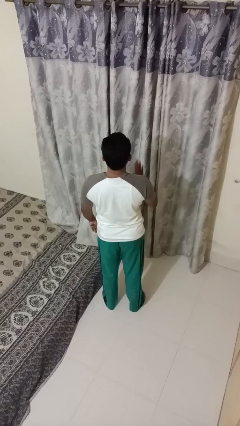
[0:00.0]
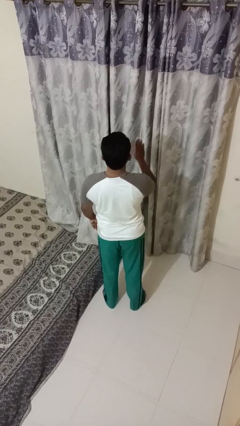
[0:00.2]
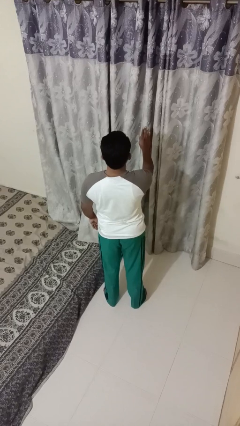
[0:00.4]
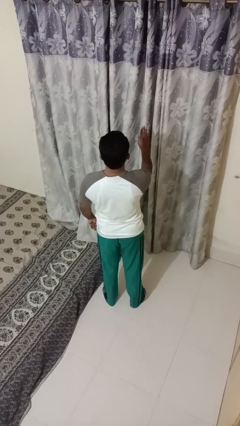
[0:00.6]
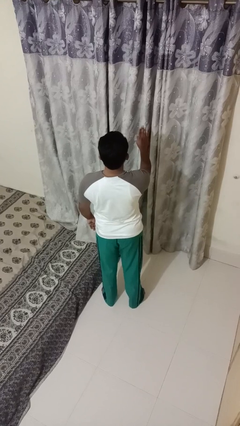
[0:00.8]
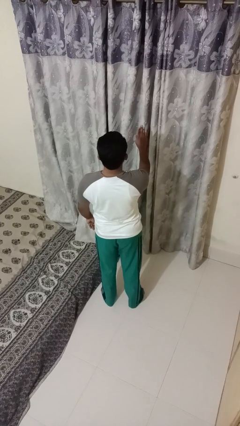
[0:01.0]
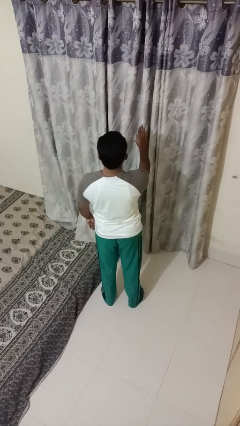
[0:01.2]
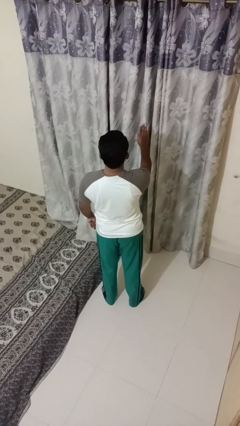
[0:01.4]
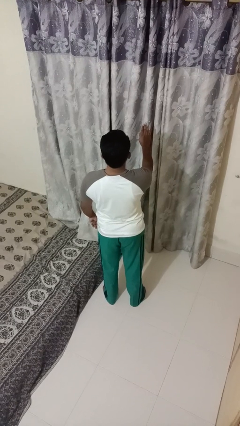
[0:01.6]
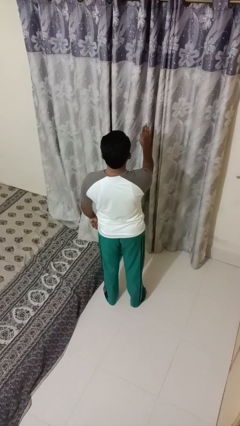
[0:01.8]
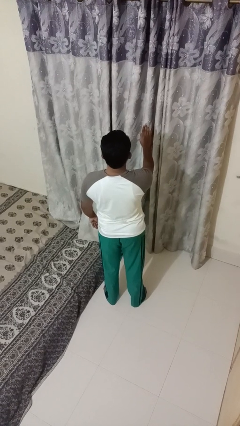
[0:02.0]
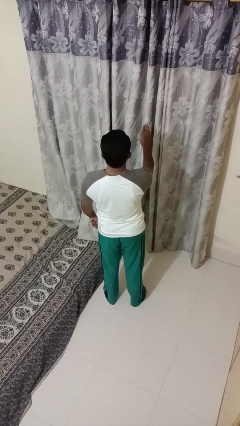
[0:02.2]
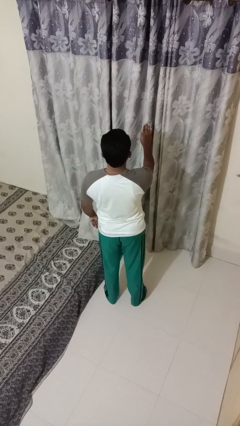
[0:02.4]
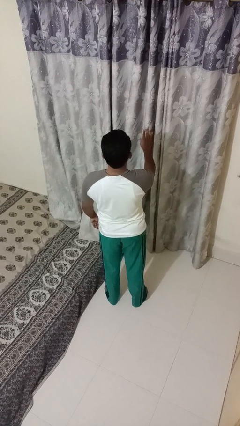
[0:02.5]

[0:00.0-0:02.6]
person gestures stop

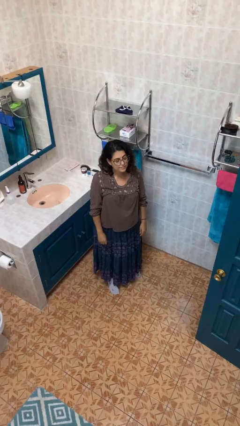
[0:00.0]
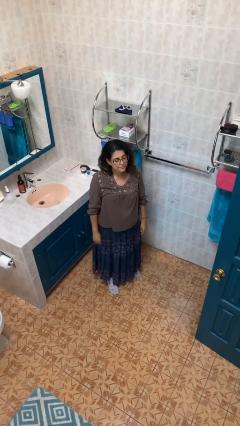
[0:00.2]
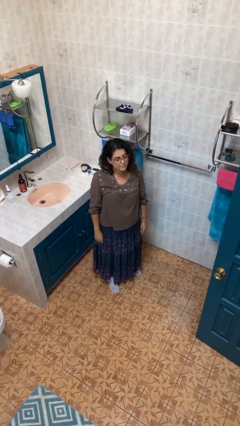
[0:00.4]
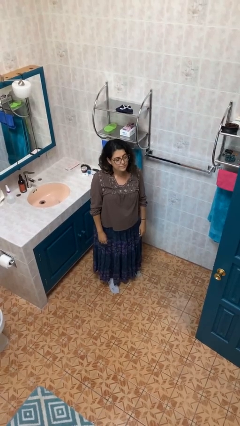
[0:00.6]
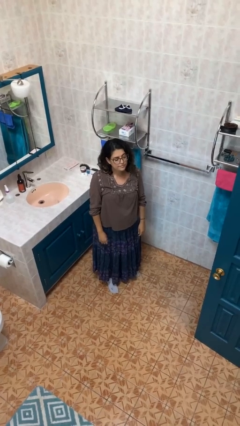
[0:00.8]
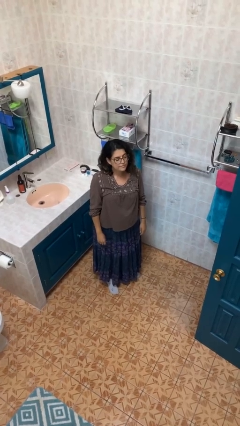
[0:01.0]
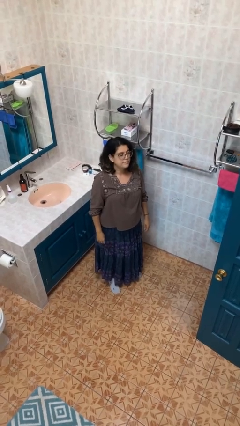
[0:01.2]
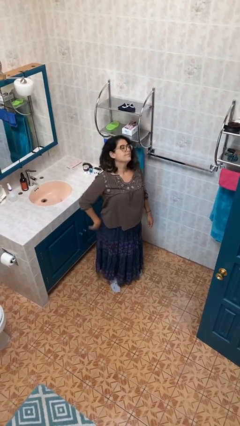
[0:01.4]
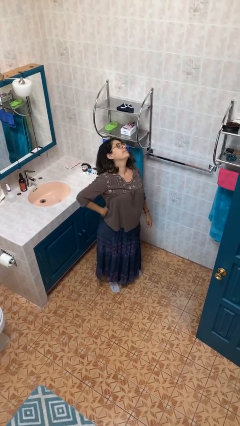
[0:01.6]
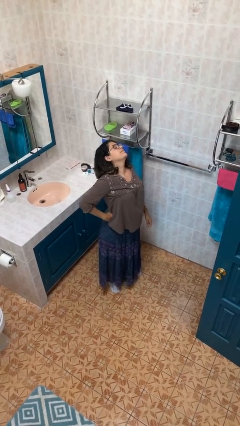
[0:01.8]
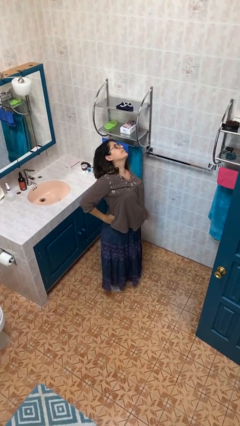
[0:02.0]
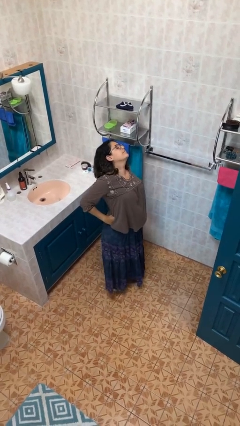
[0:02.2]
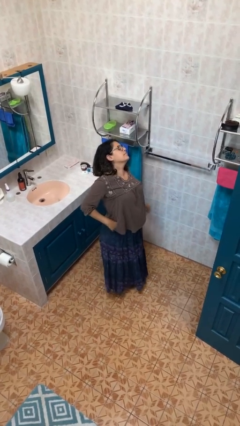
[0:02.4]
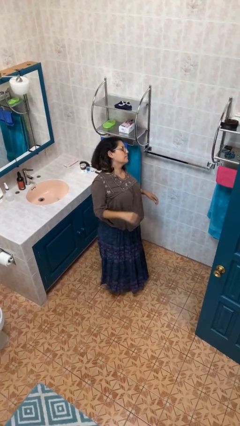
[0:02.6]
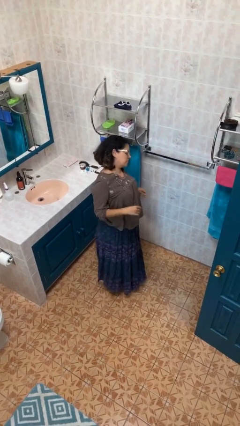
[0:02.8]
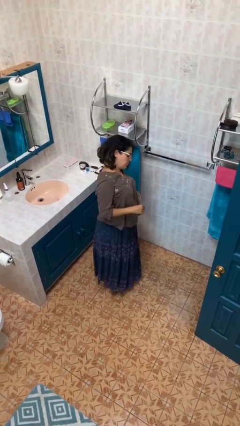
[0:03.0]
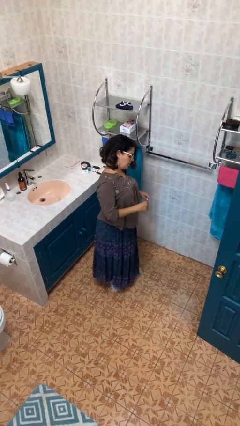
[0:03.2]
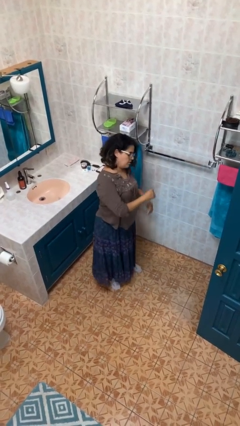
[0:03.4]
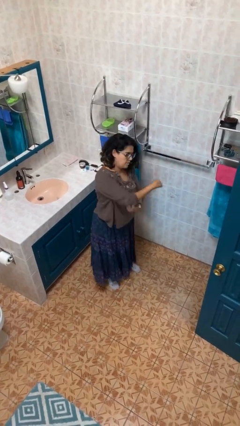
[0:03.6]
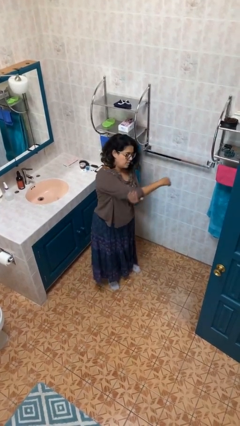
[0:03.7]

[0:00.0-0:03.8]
person stretches back

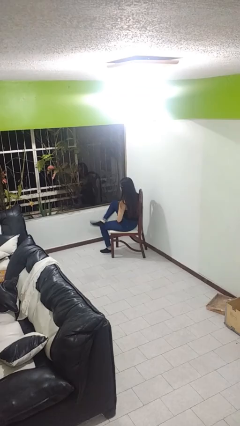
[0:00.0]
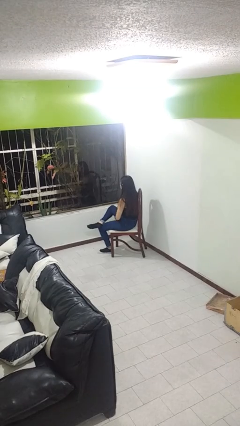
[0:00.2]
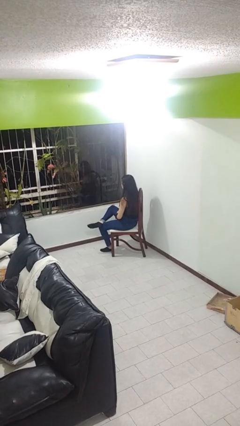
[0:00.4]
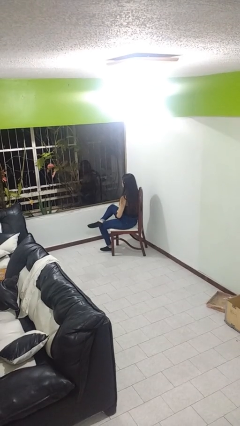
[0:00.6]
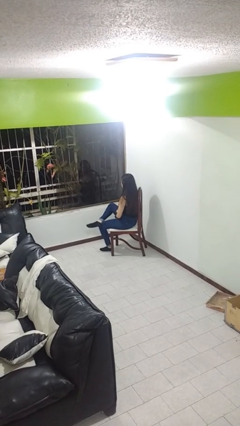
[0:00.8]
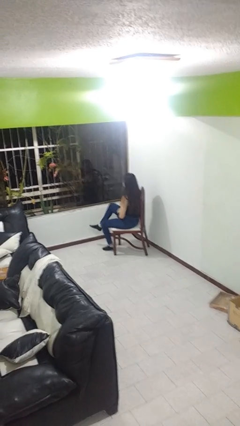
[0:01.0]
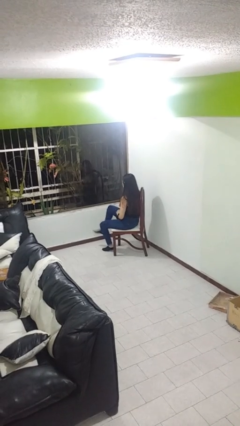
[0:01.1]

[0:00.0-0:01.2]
person crosses legs

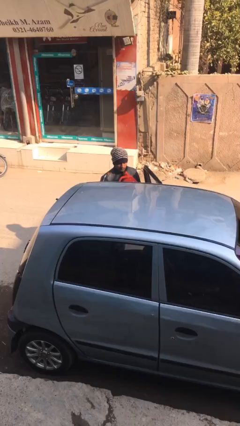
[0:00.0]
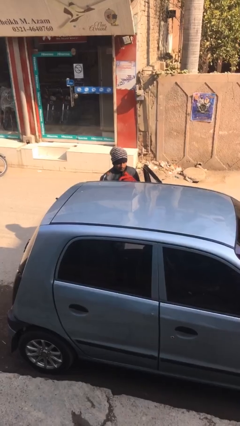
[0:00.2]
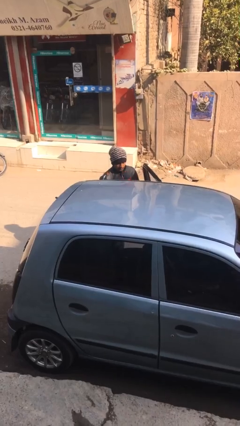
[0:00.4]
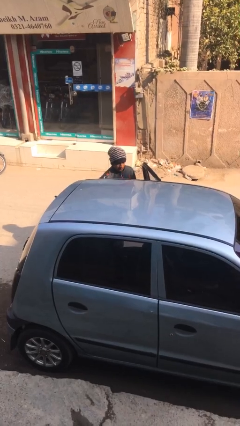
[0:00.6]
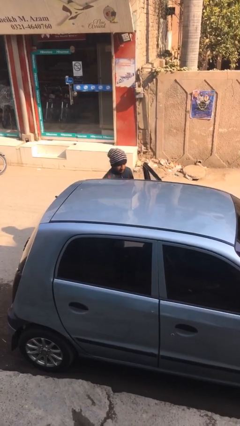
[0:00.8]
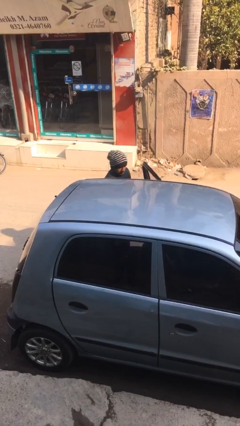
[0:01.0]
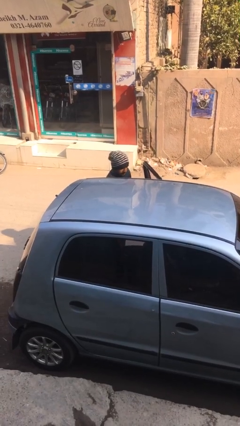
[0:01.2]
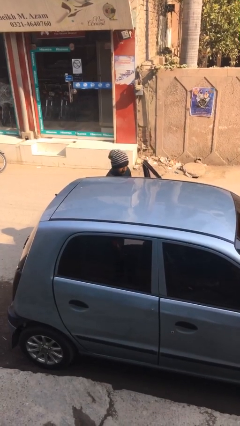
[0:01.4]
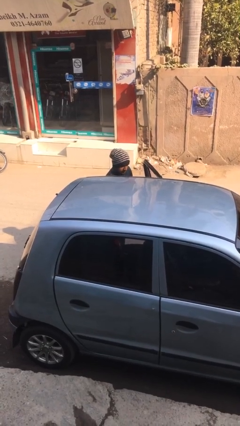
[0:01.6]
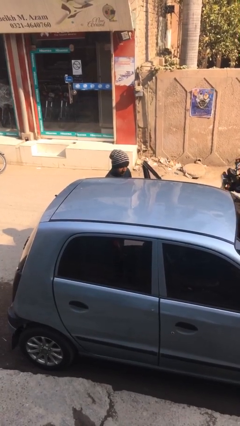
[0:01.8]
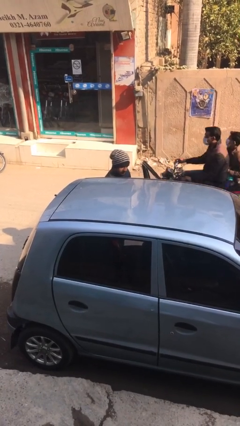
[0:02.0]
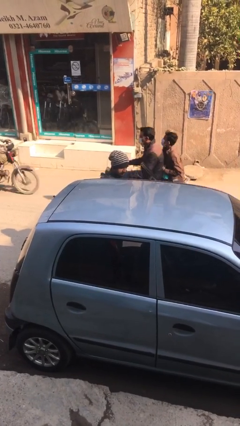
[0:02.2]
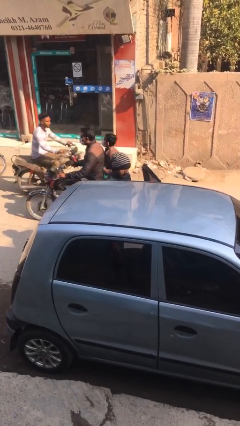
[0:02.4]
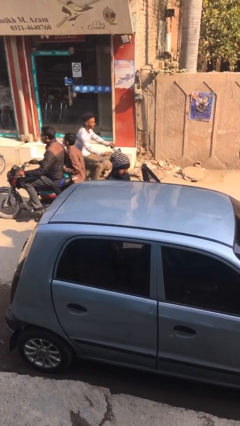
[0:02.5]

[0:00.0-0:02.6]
person loads car

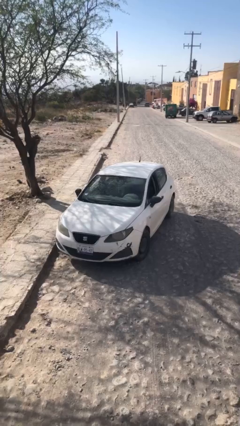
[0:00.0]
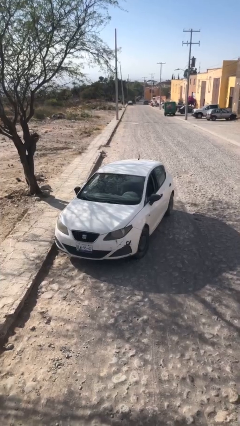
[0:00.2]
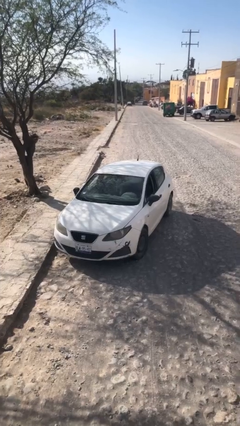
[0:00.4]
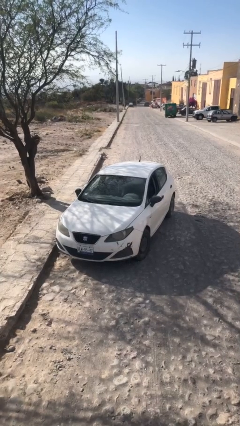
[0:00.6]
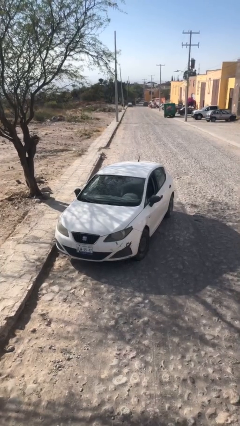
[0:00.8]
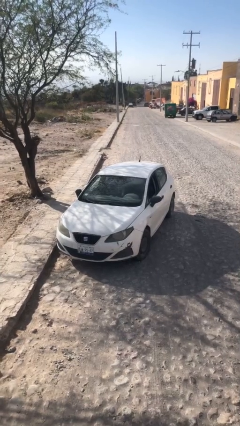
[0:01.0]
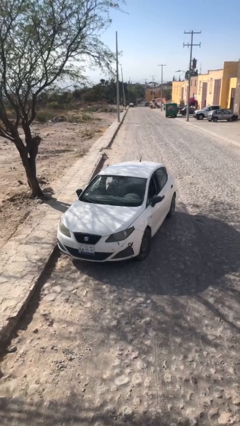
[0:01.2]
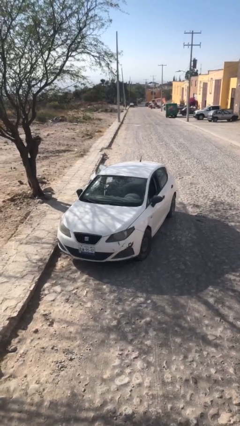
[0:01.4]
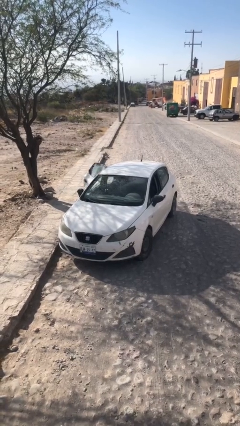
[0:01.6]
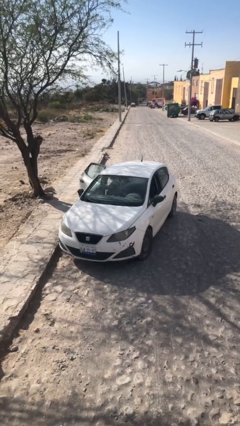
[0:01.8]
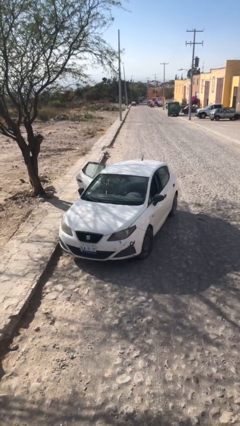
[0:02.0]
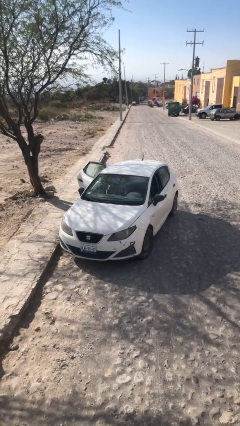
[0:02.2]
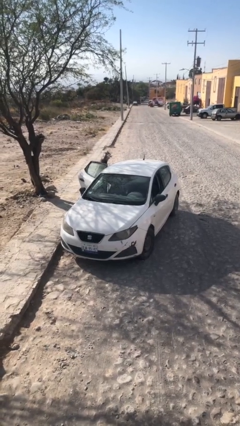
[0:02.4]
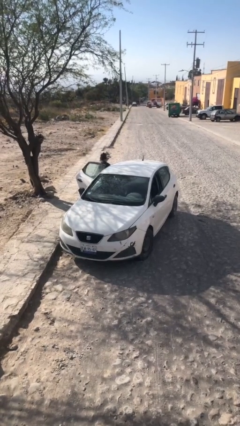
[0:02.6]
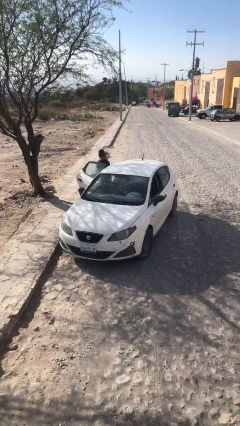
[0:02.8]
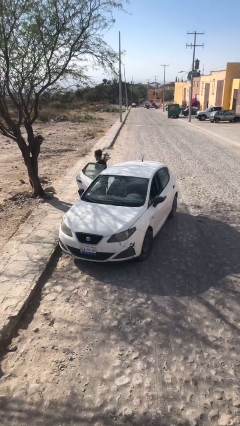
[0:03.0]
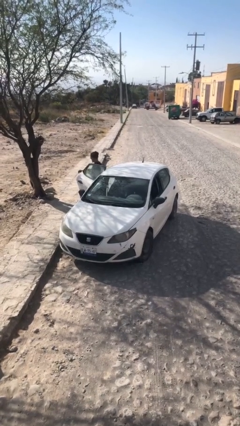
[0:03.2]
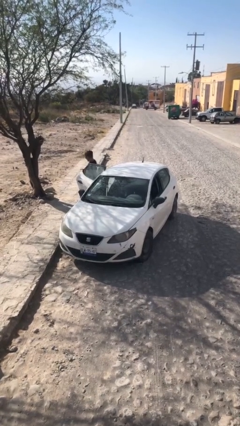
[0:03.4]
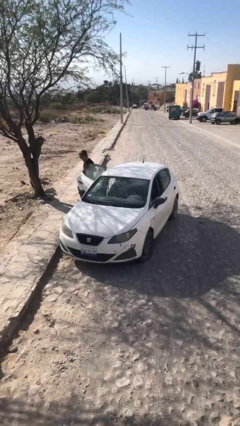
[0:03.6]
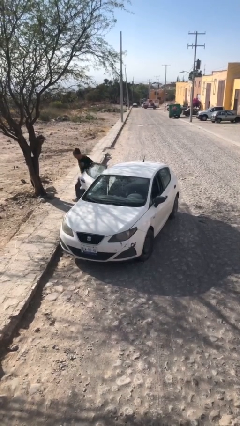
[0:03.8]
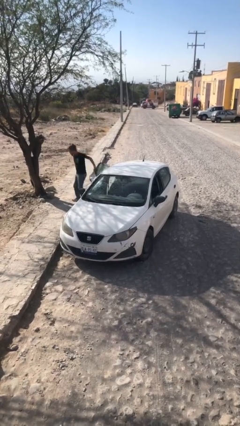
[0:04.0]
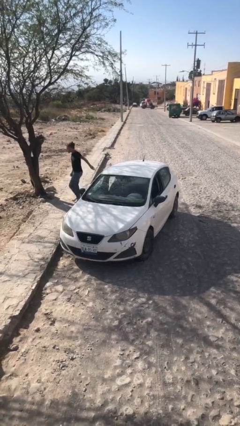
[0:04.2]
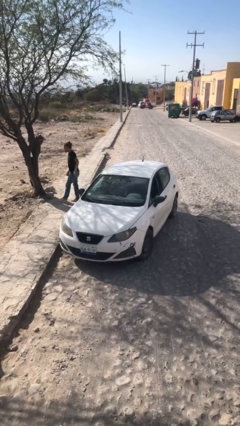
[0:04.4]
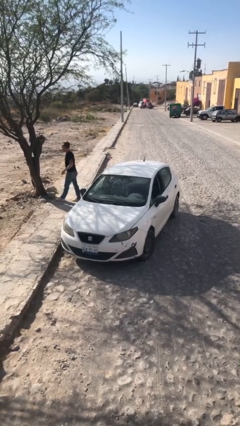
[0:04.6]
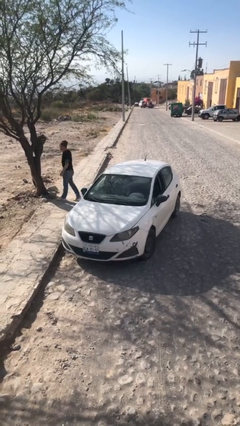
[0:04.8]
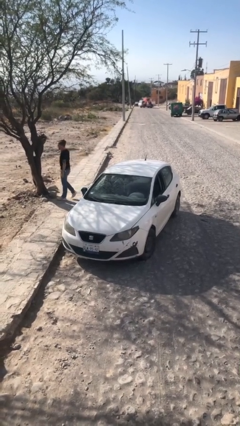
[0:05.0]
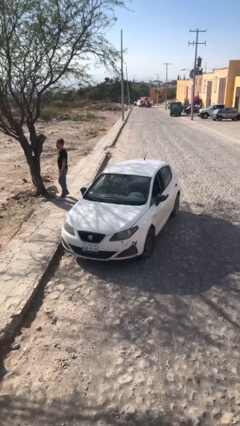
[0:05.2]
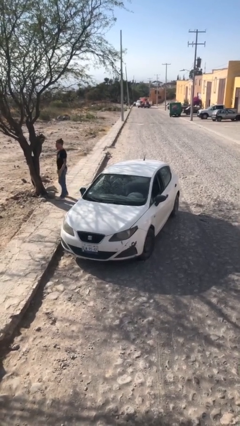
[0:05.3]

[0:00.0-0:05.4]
car drops off person

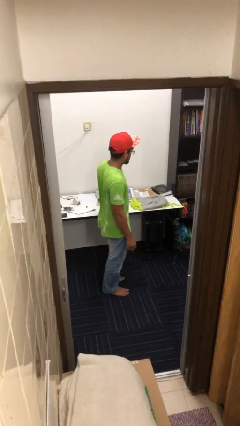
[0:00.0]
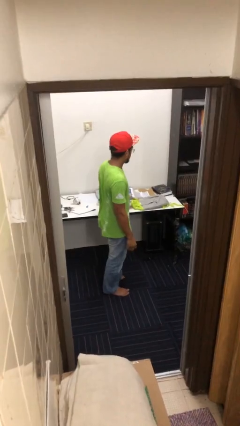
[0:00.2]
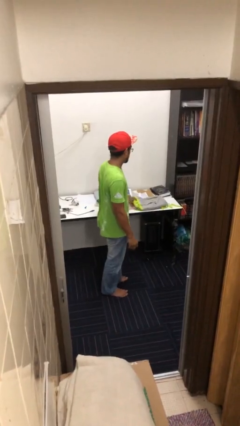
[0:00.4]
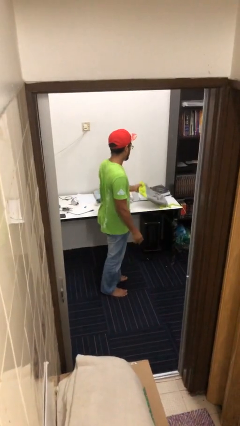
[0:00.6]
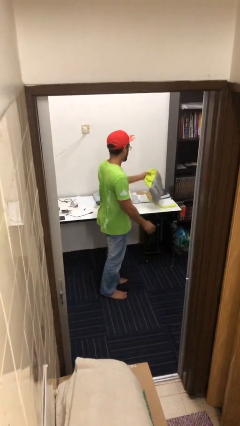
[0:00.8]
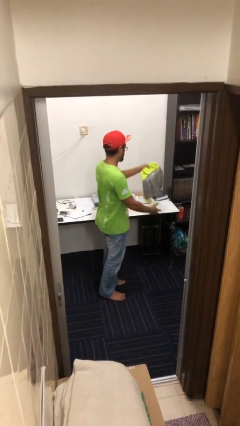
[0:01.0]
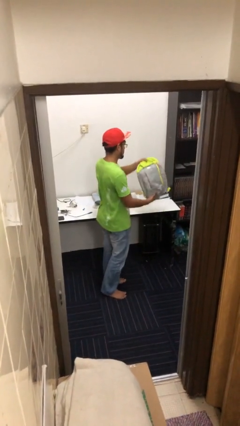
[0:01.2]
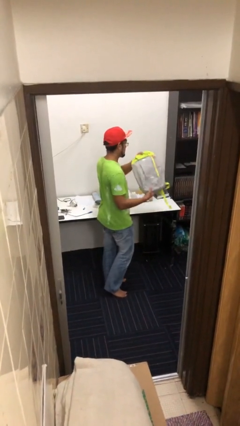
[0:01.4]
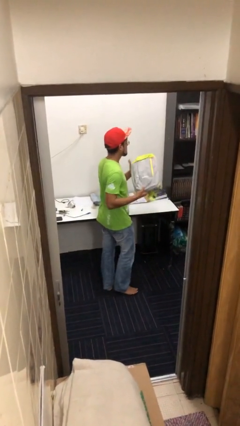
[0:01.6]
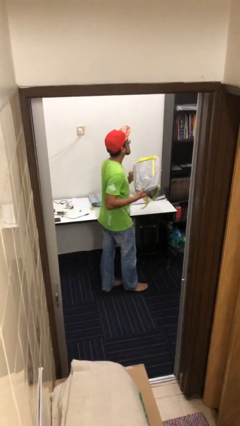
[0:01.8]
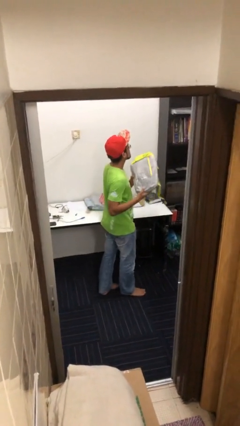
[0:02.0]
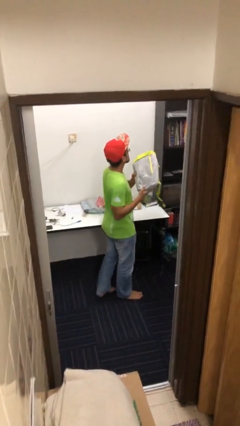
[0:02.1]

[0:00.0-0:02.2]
person picks up object from table
